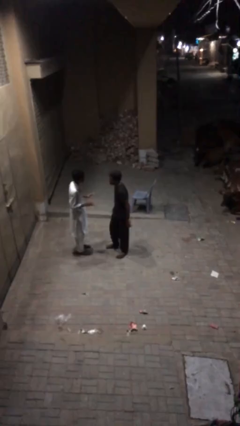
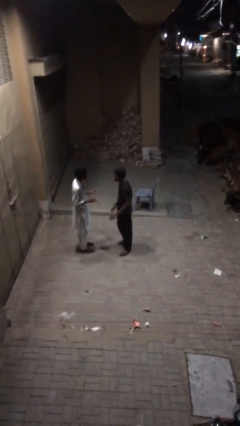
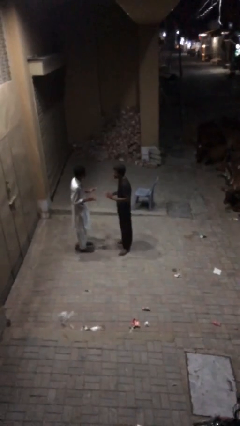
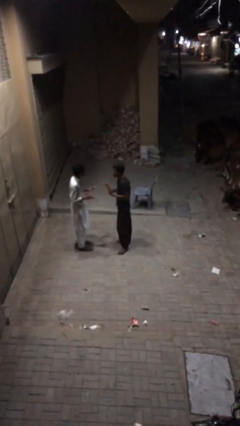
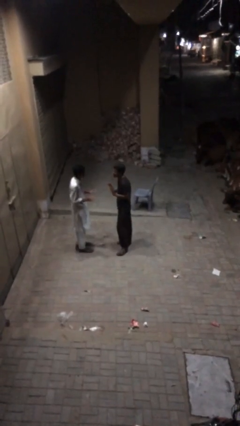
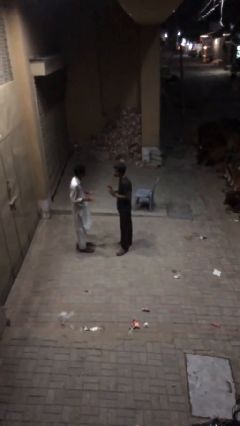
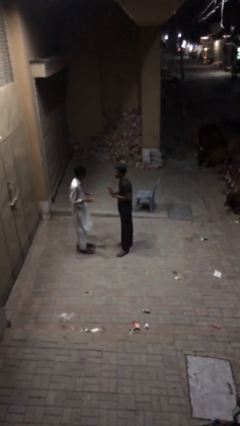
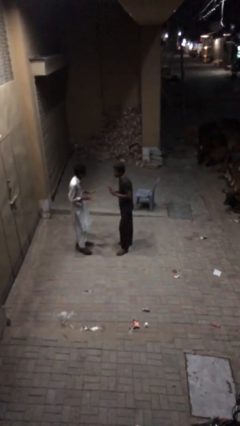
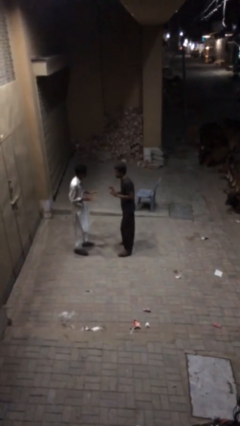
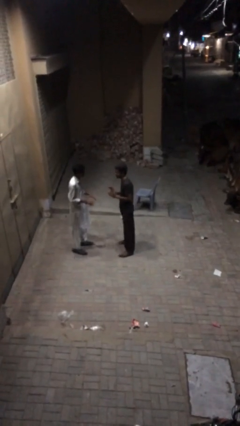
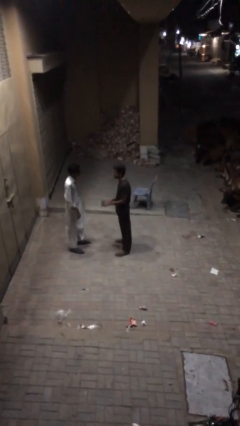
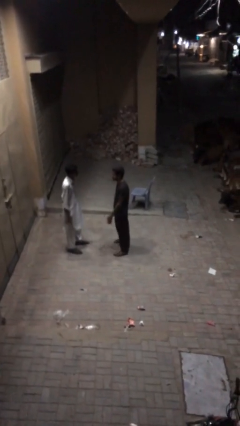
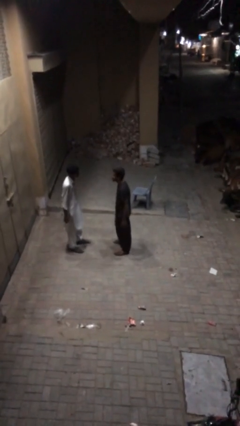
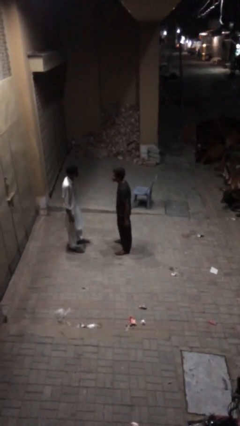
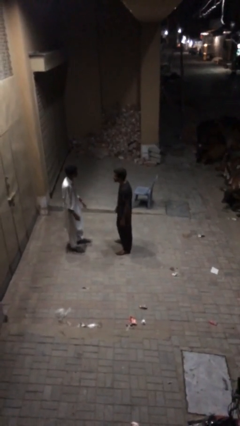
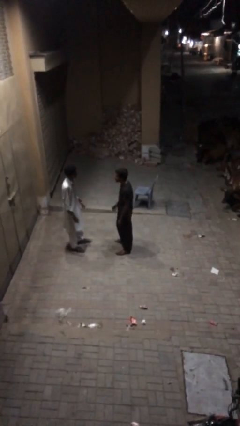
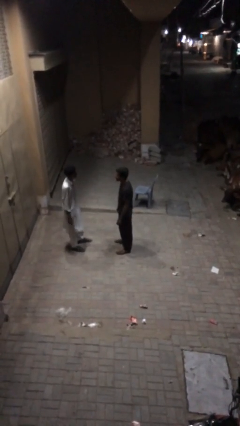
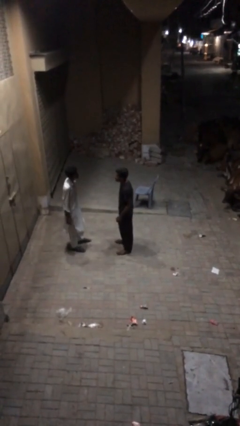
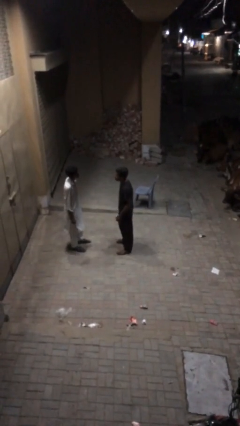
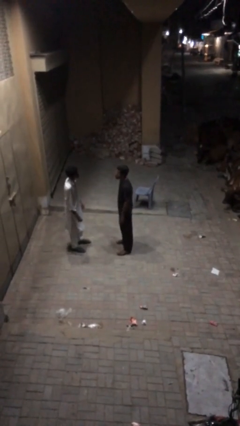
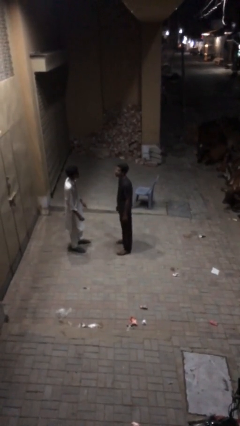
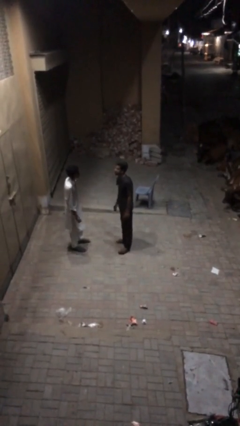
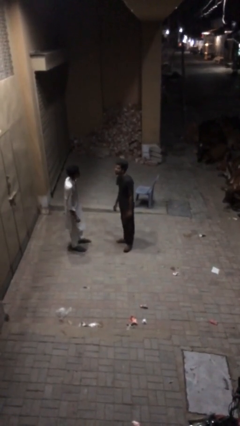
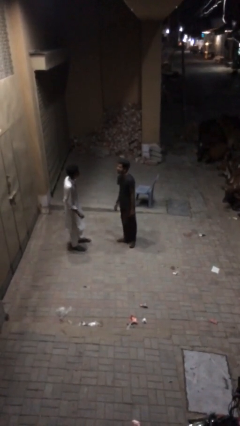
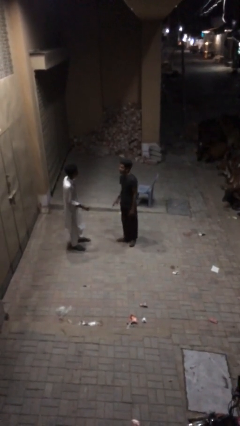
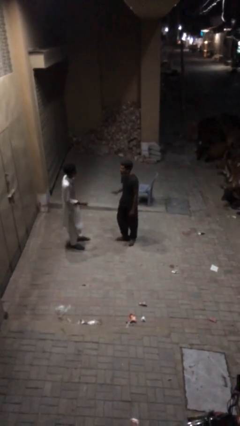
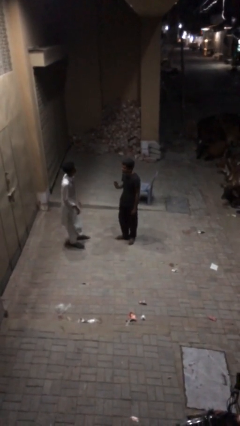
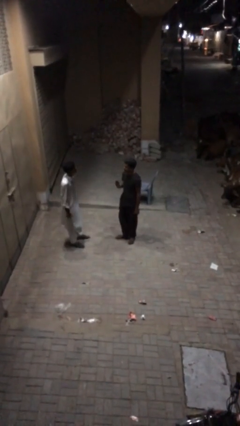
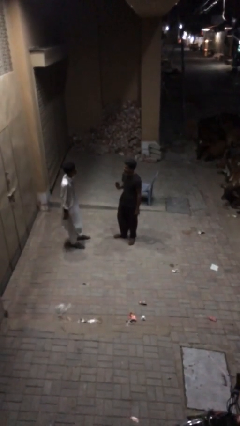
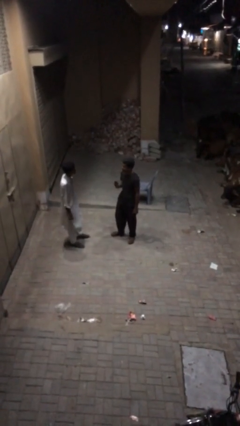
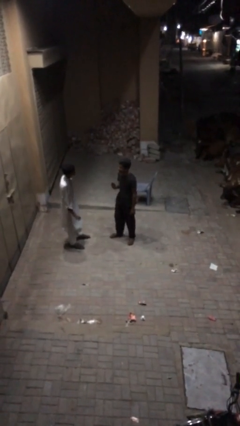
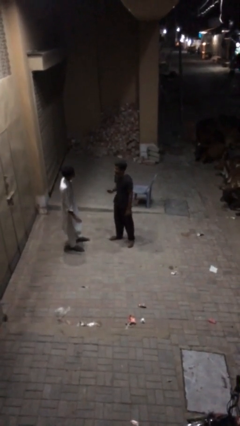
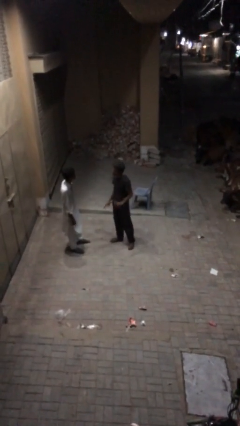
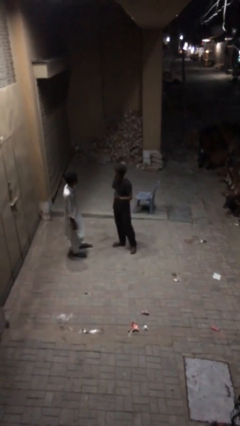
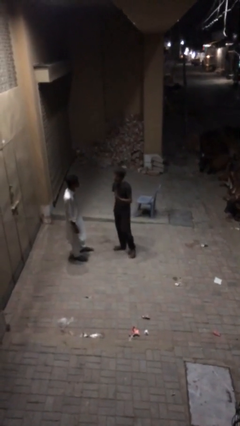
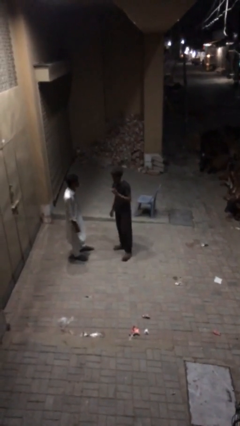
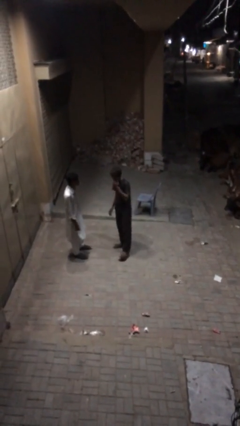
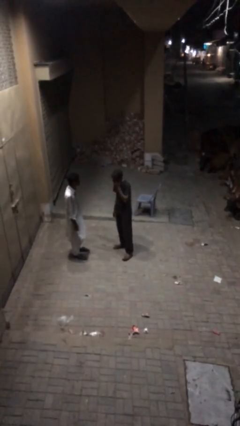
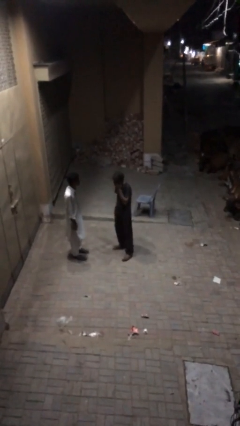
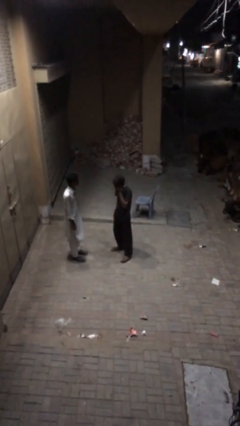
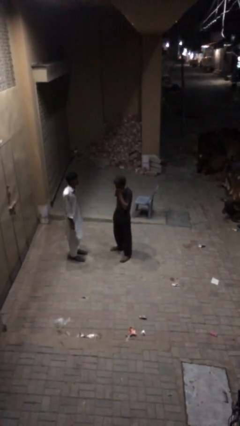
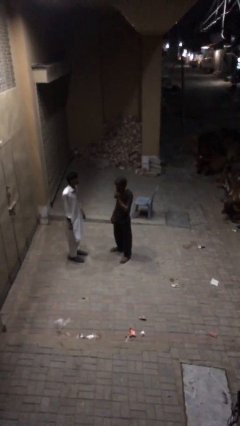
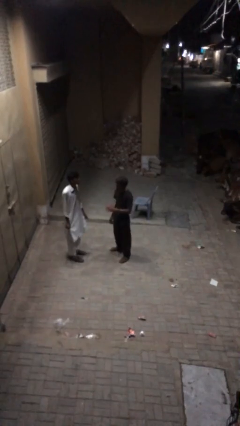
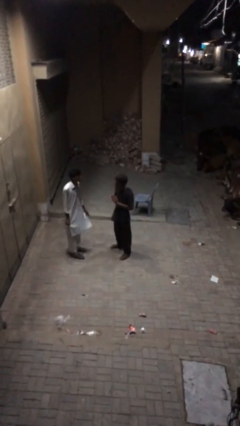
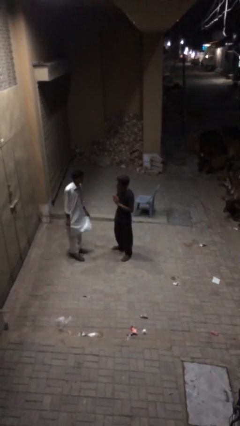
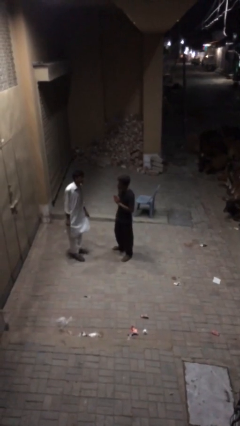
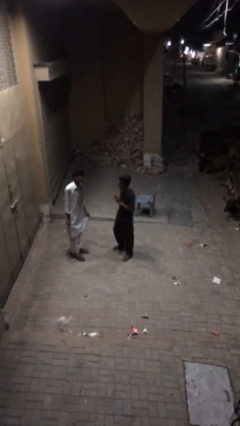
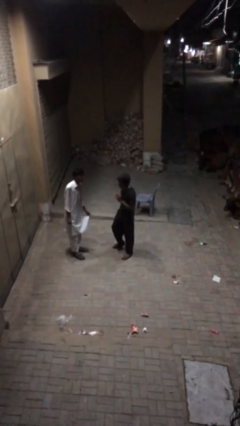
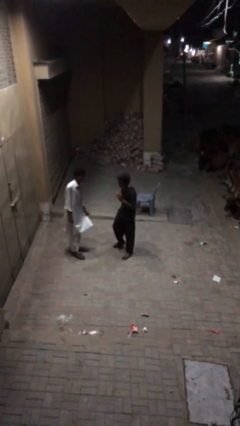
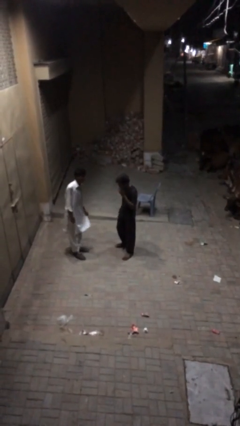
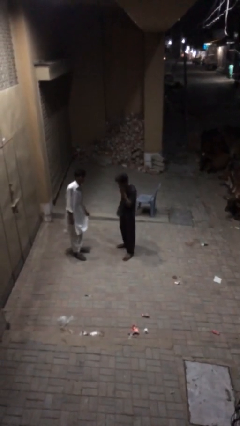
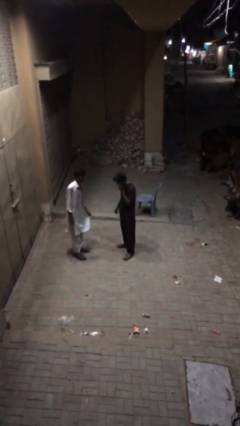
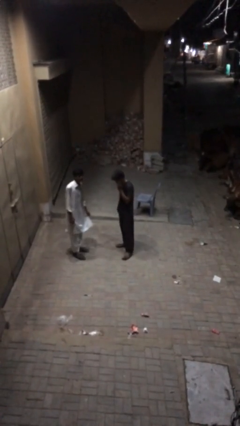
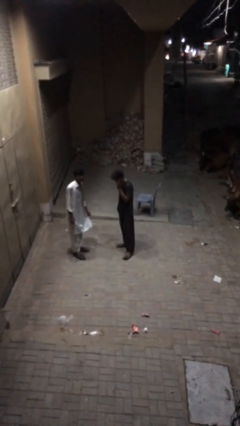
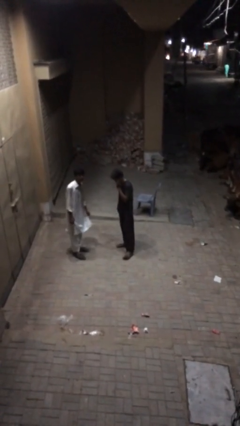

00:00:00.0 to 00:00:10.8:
person talks to person

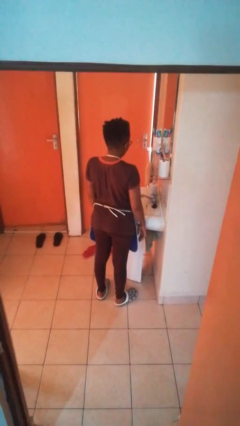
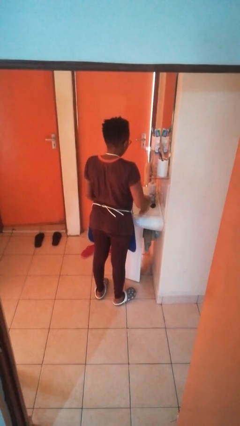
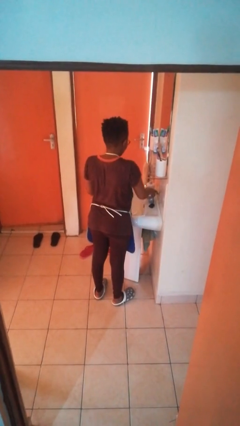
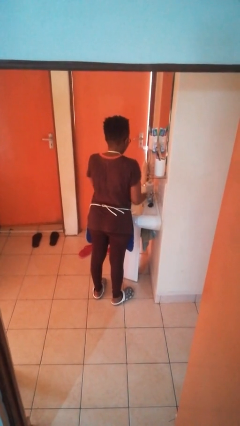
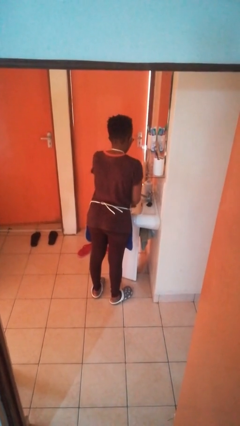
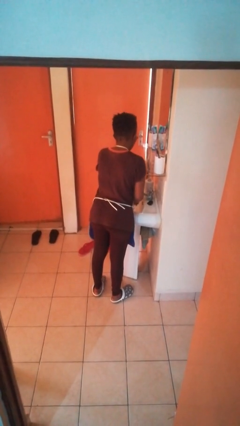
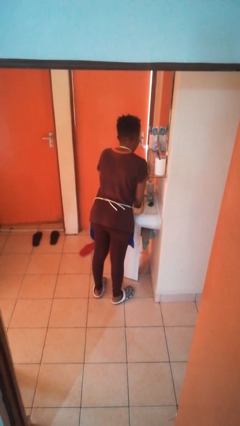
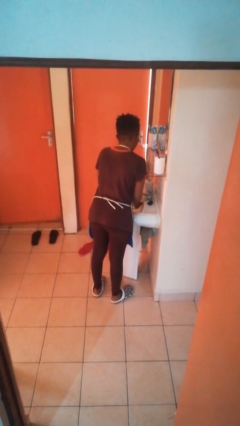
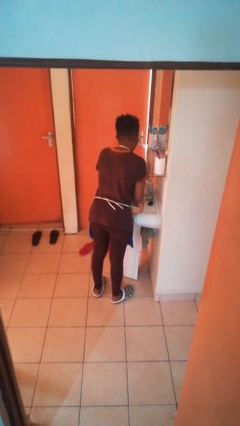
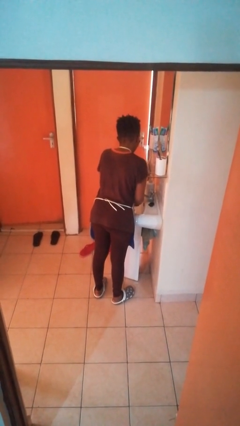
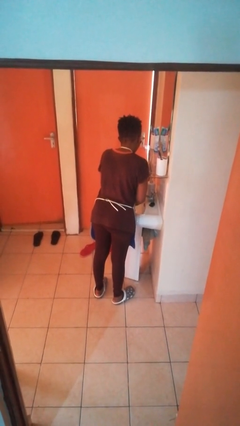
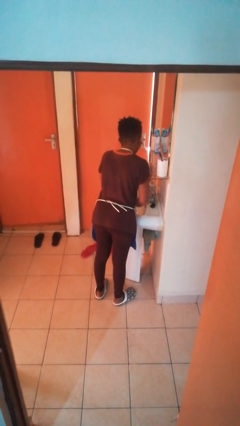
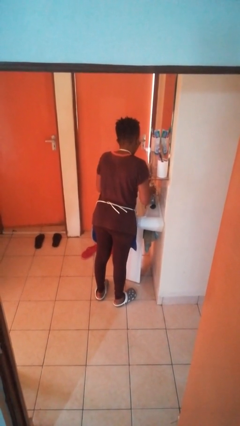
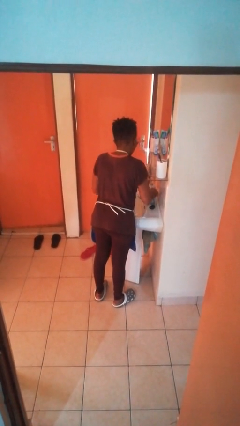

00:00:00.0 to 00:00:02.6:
person washes hands

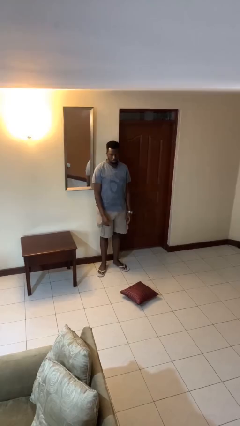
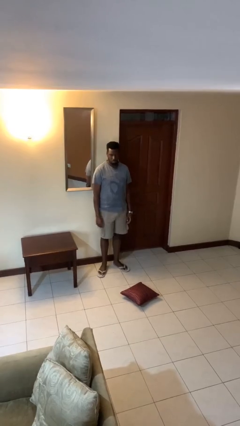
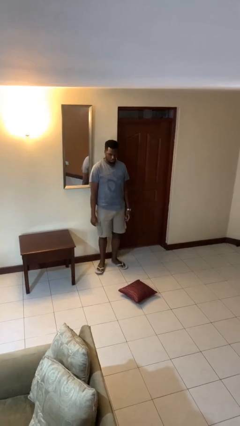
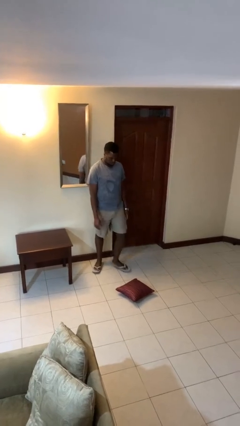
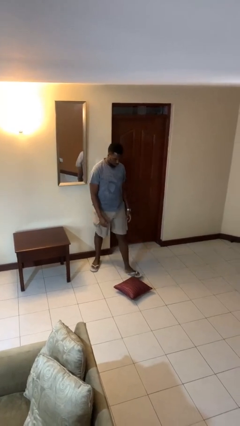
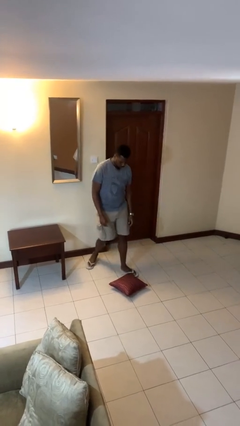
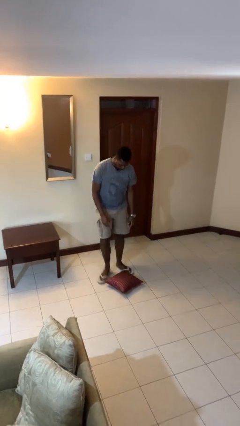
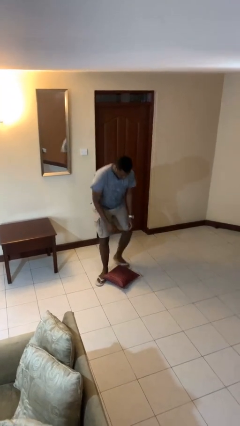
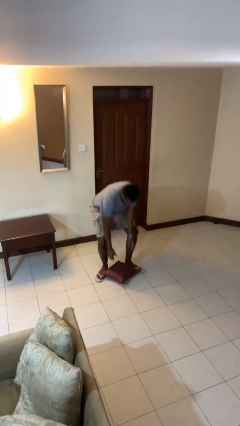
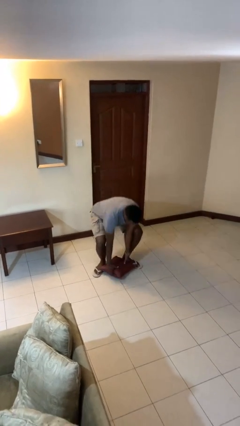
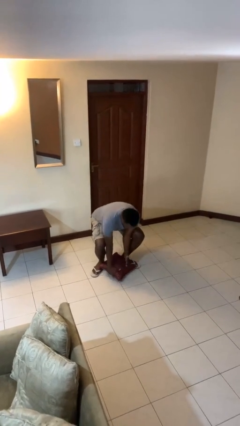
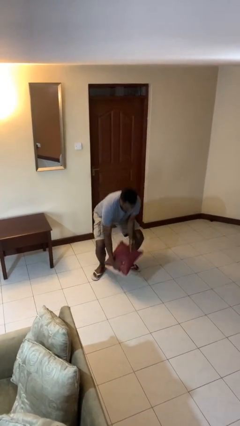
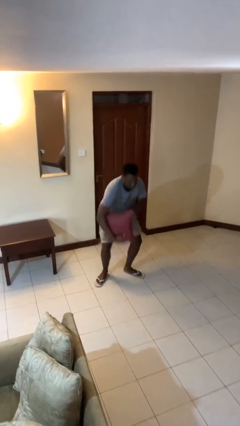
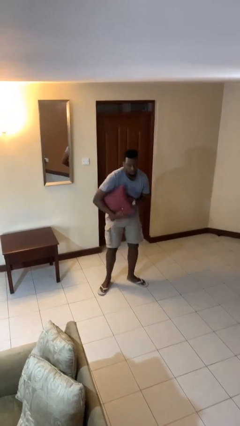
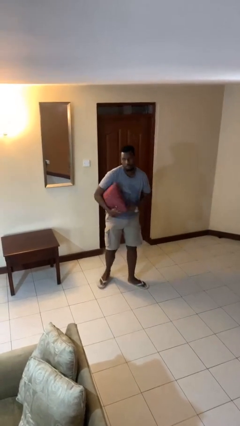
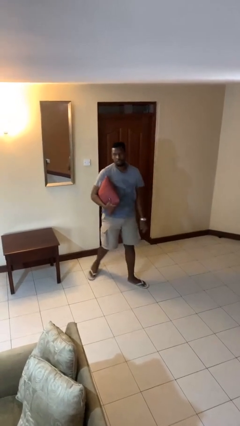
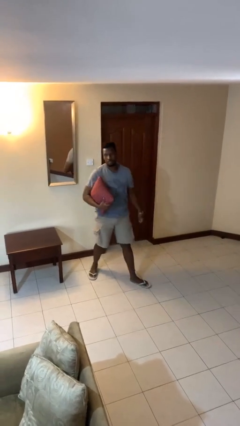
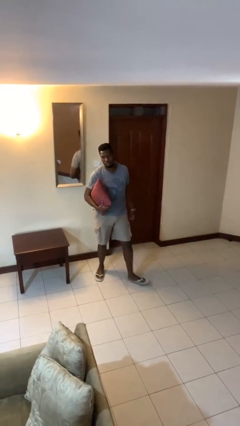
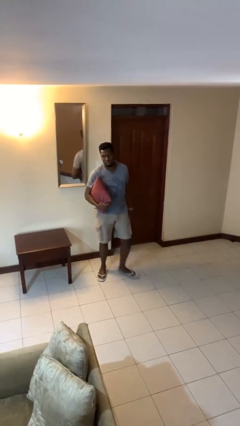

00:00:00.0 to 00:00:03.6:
person picks up object from floor

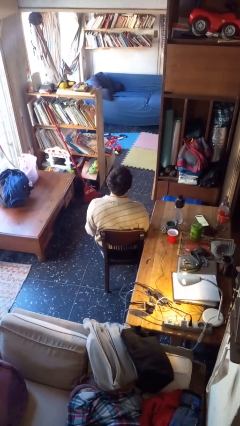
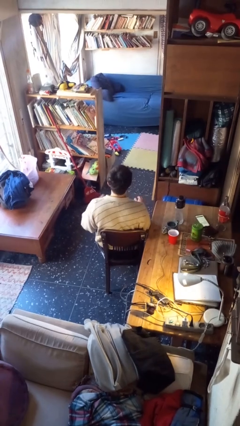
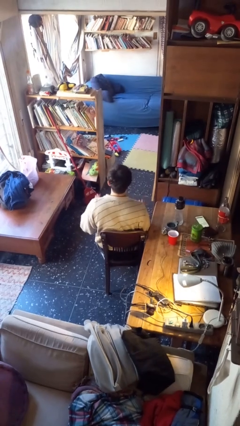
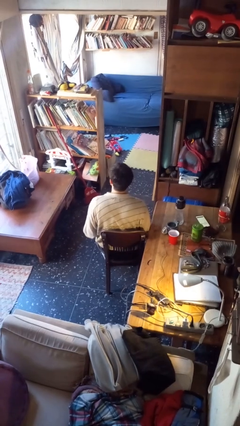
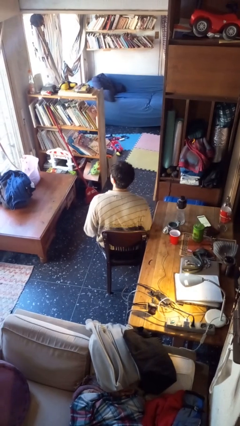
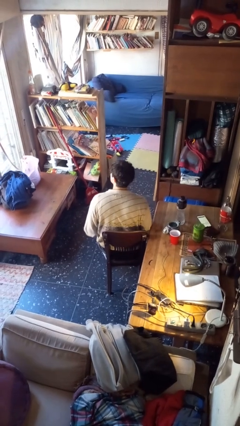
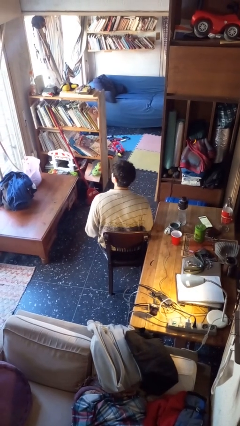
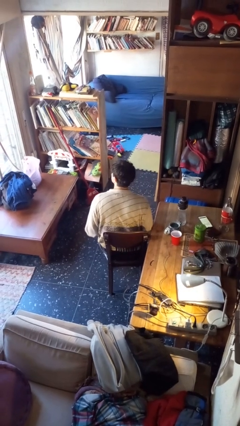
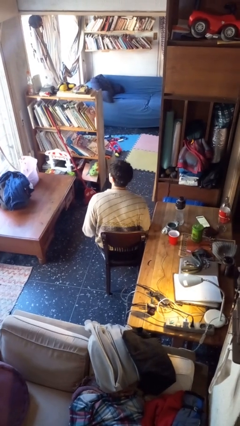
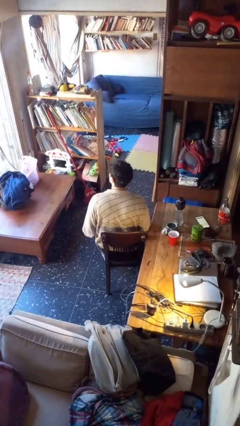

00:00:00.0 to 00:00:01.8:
person slaps hands on thighs
